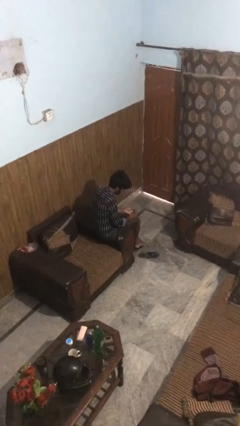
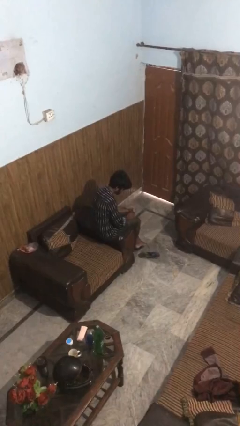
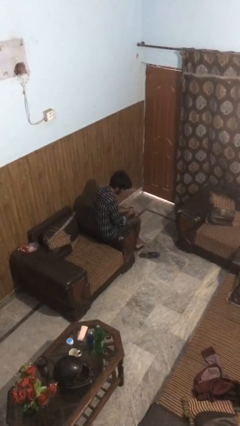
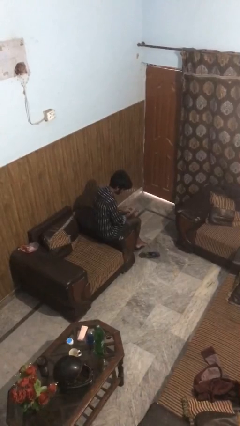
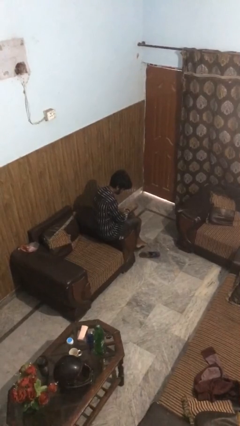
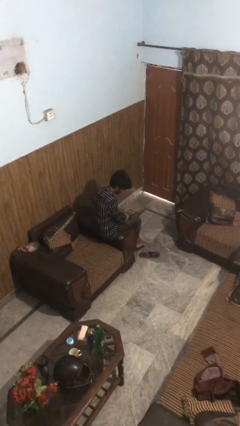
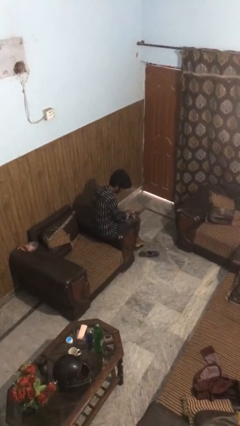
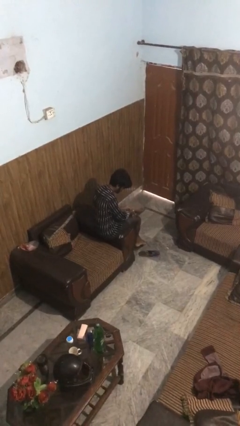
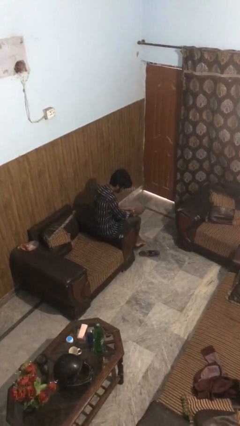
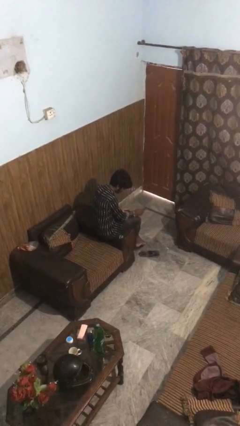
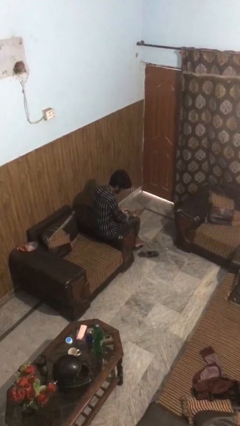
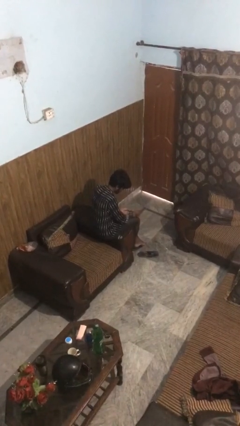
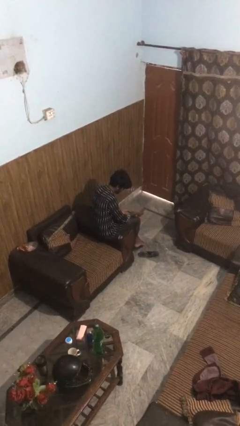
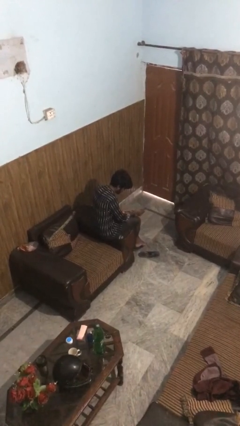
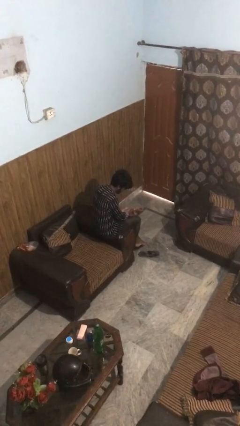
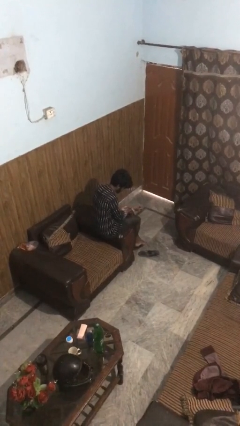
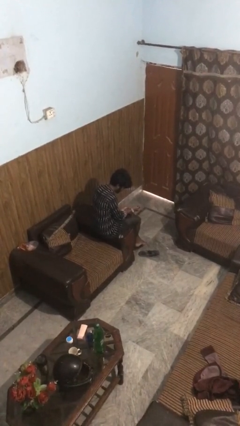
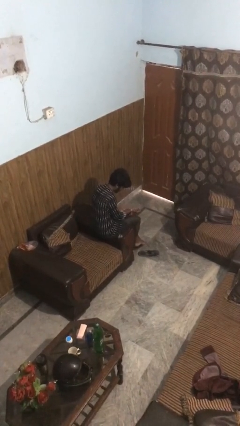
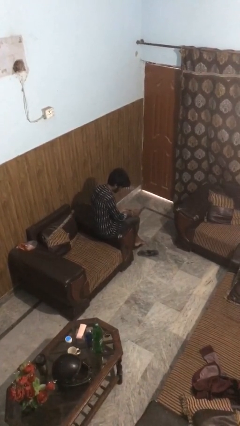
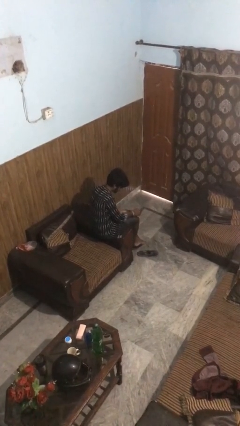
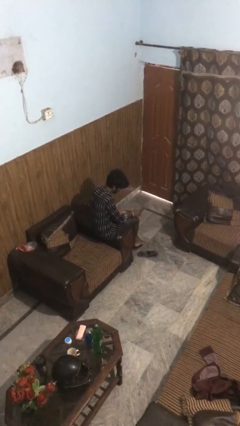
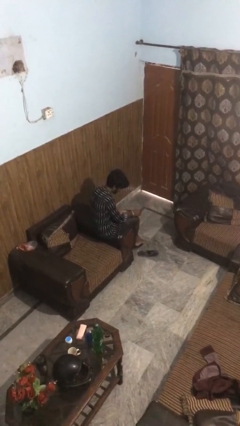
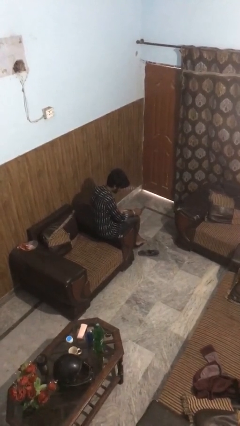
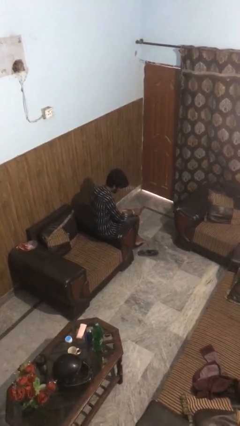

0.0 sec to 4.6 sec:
person puts on wristwatch

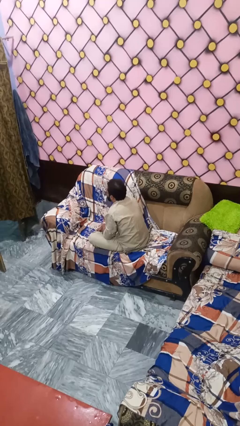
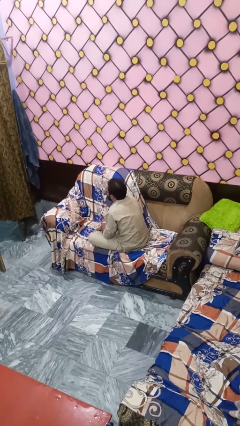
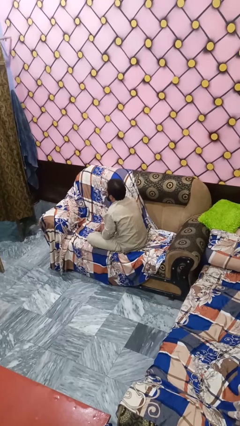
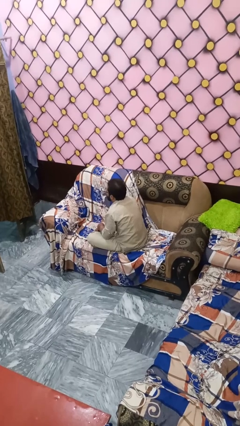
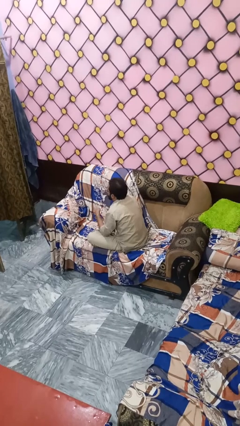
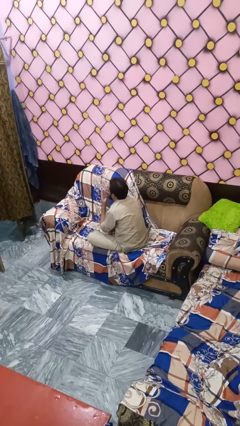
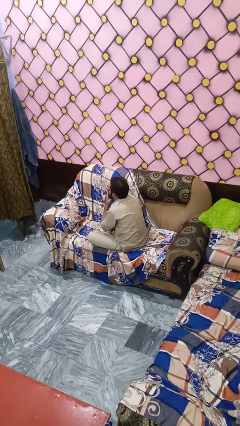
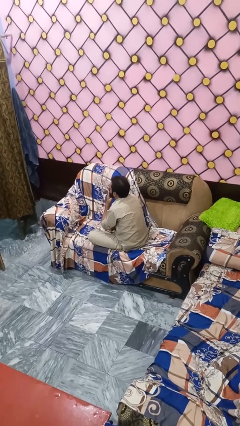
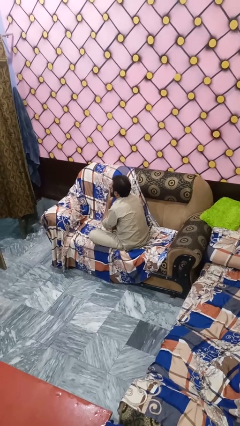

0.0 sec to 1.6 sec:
person gestures blow kiss

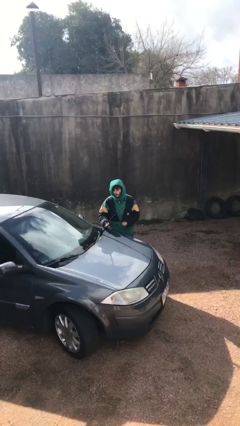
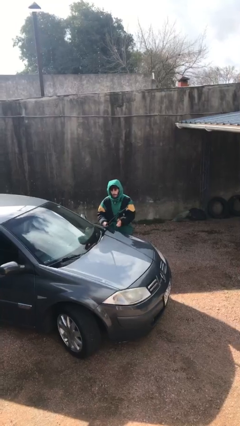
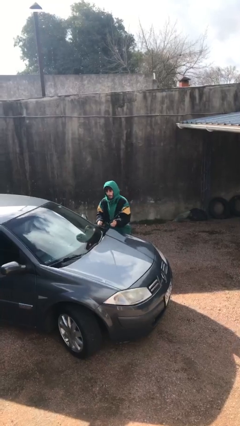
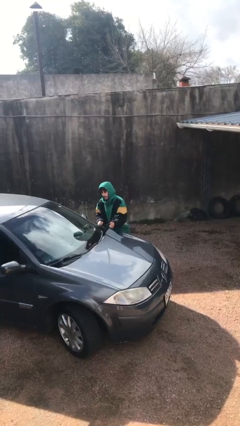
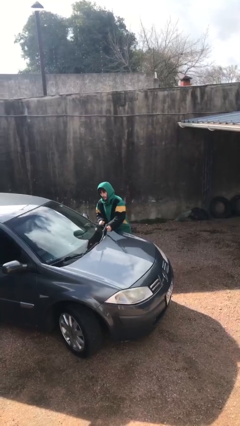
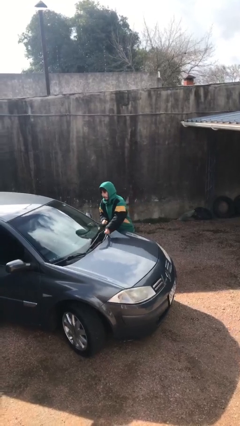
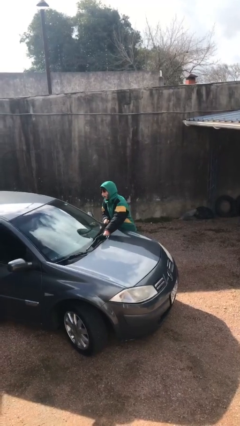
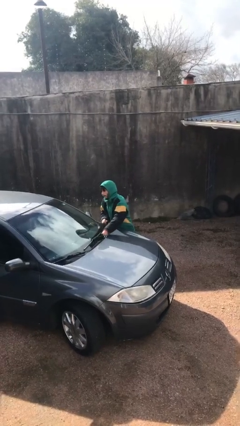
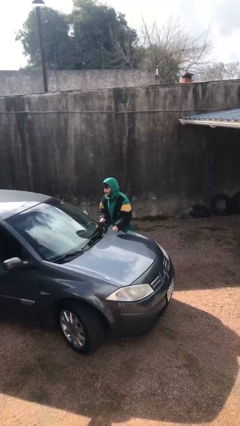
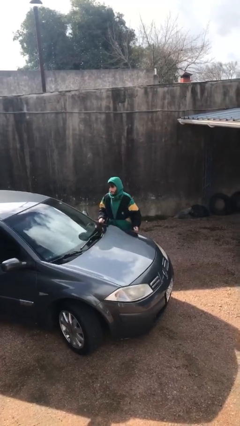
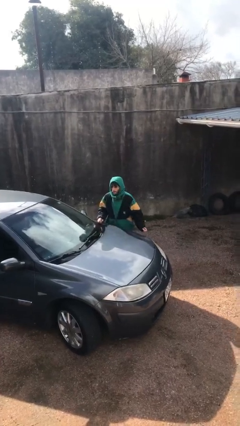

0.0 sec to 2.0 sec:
person flips down car wipers

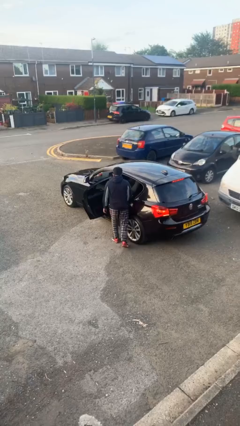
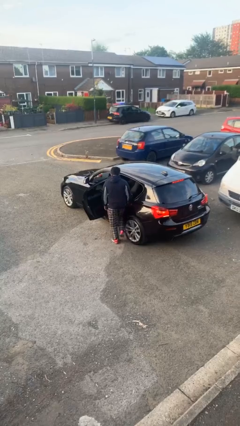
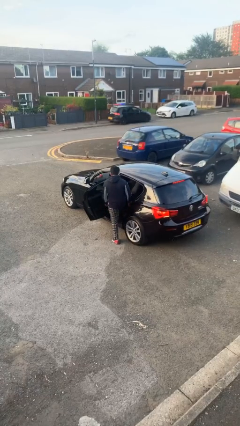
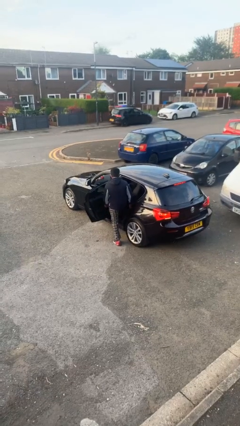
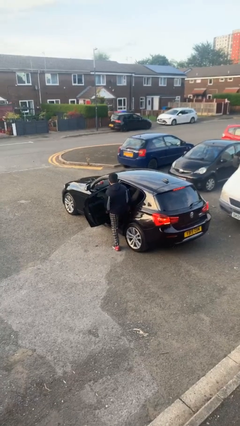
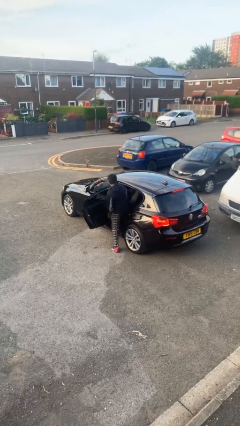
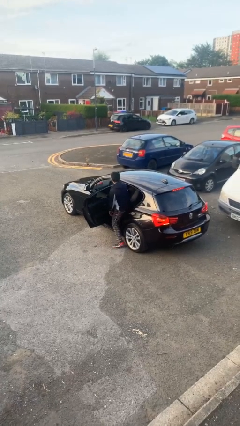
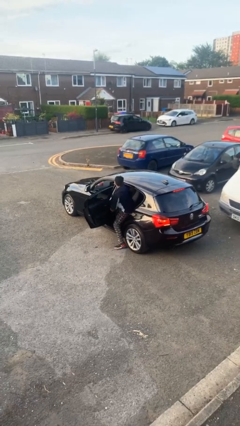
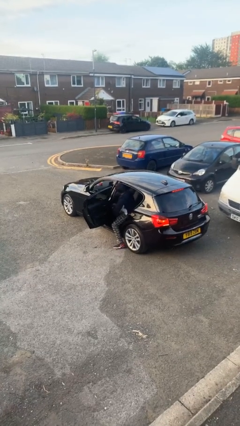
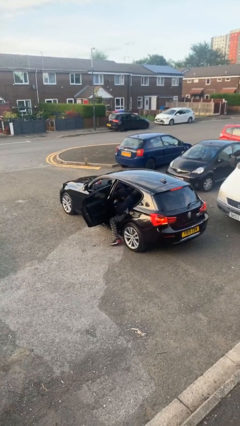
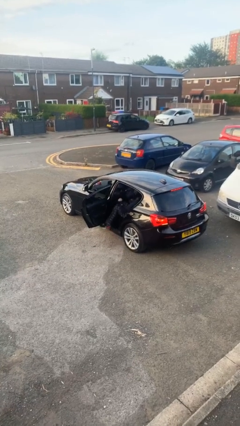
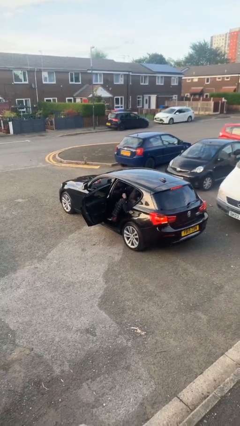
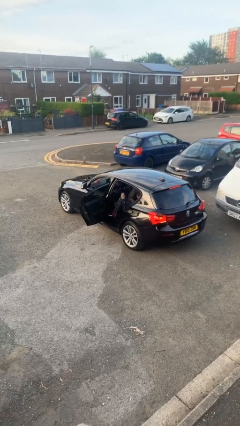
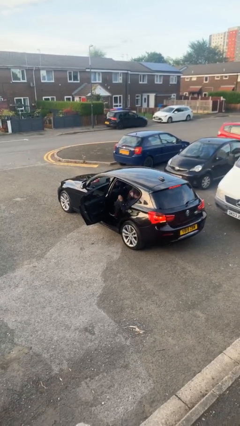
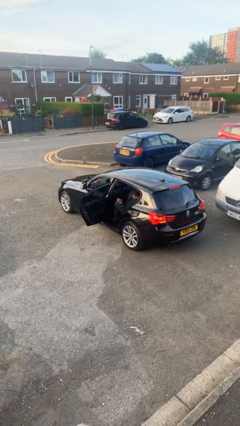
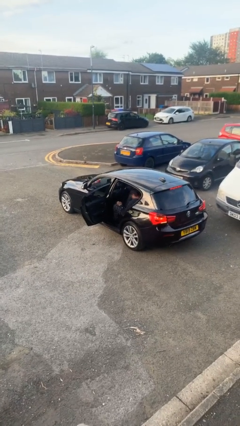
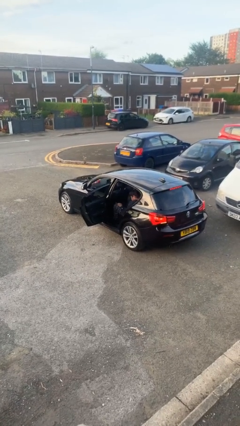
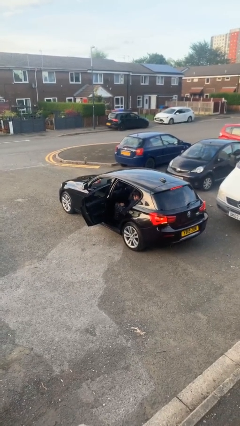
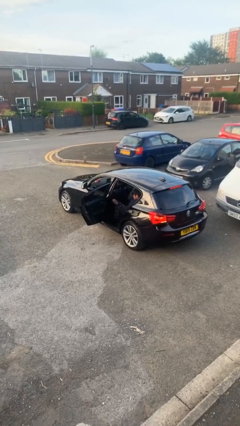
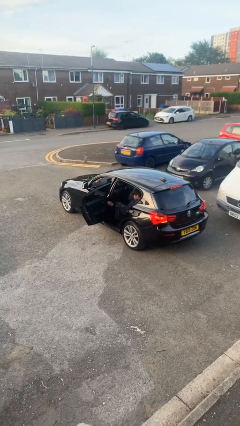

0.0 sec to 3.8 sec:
person enters car

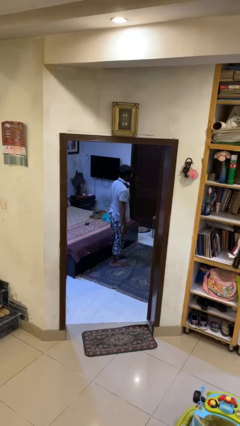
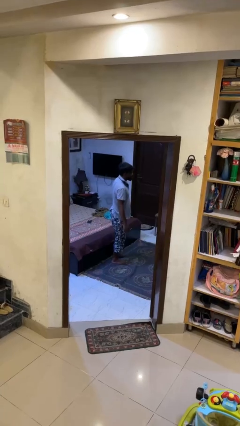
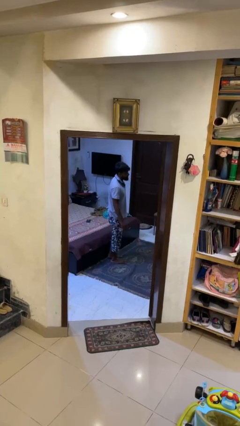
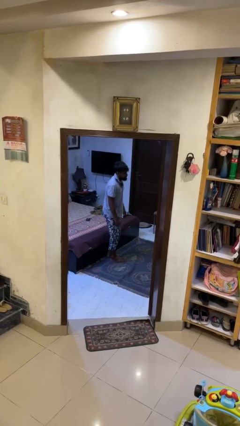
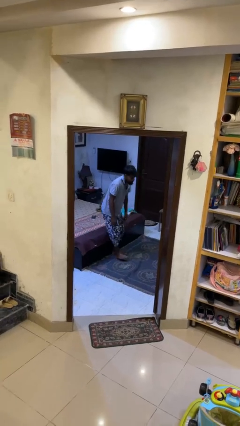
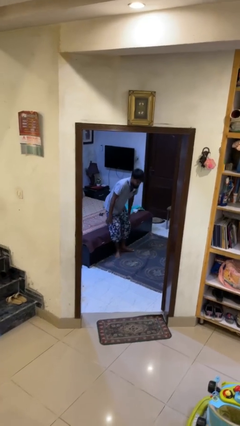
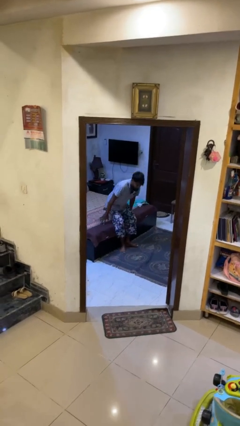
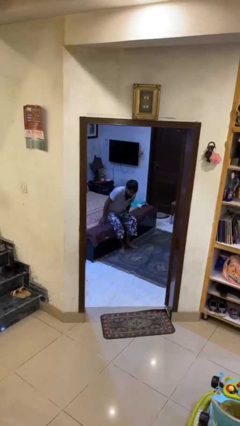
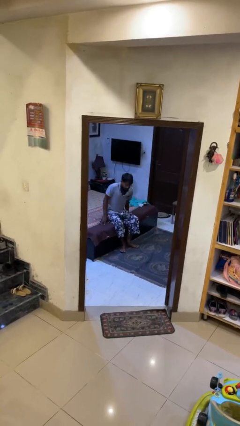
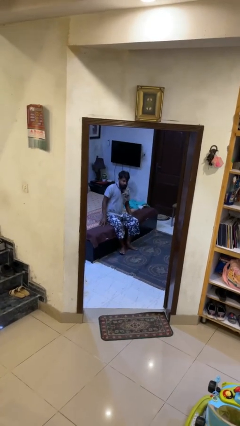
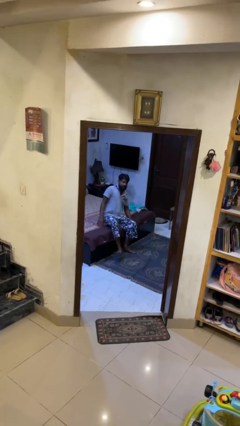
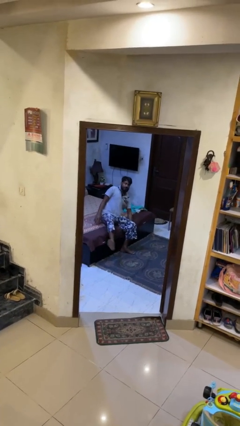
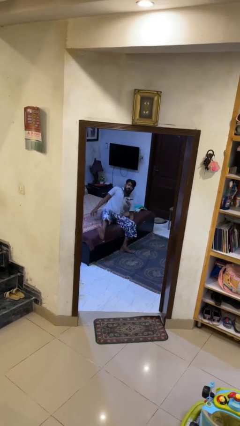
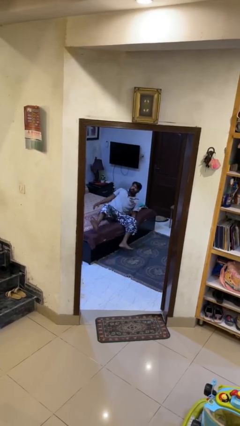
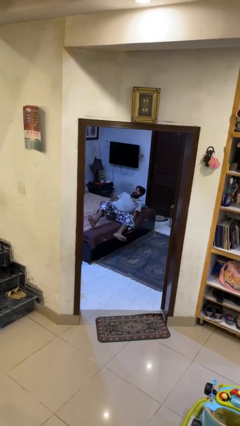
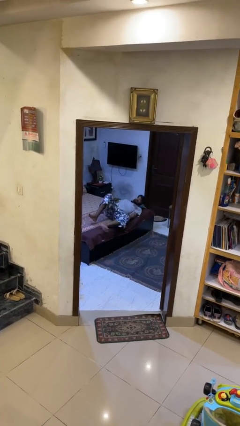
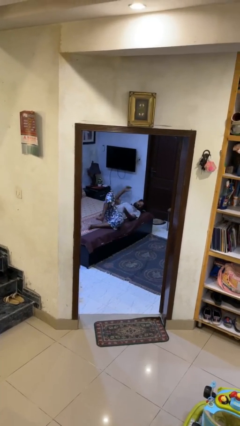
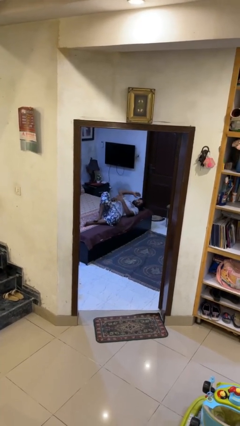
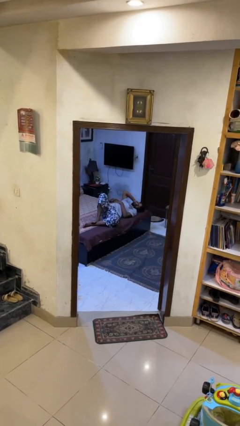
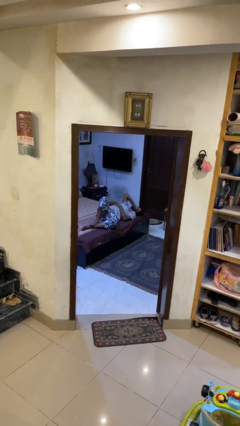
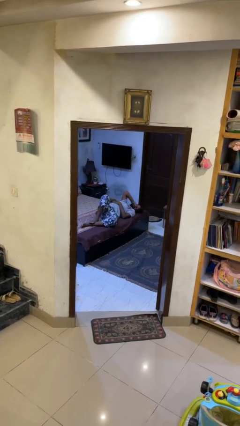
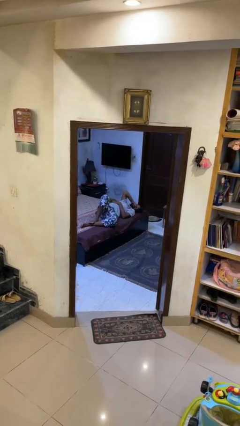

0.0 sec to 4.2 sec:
person lies down on bed

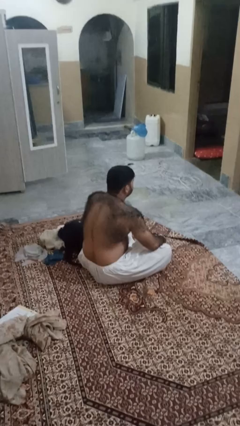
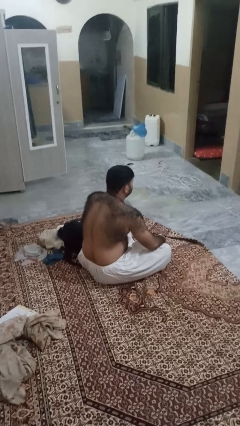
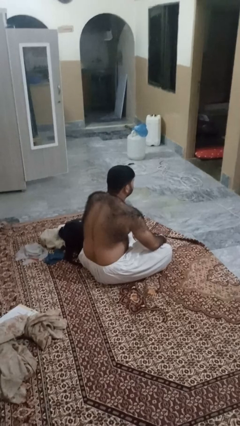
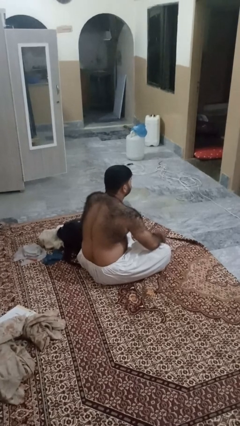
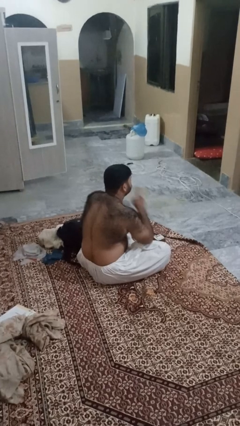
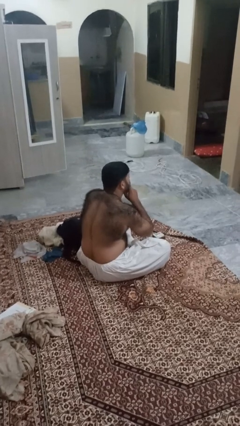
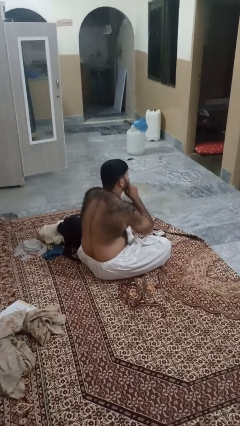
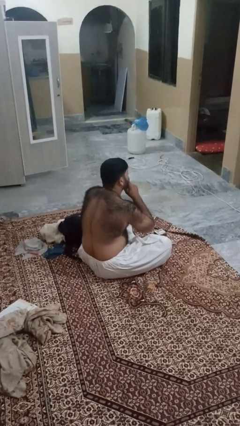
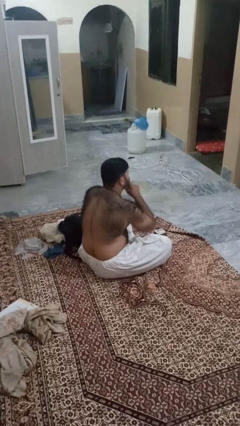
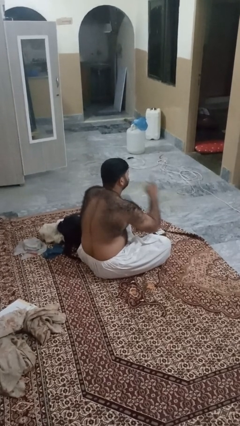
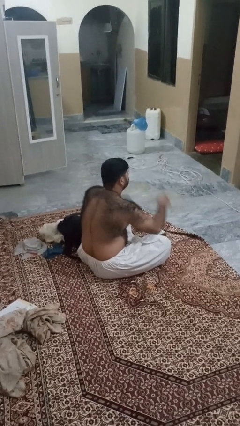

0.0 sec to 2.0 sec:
person gestures be quiet
